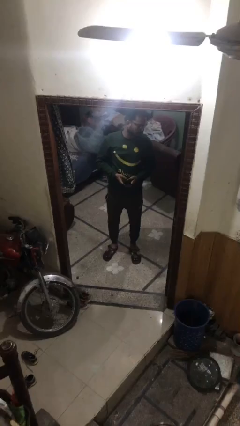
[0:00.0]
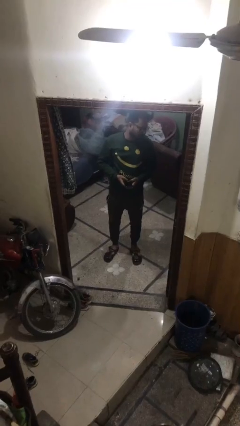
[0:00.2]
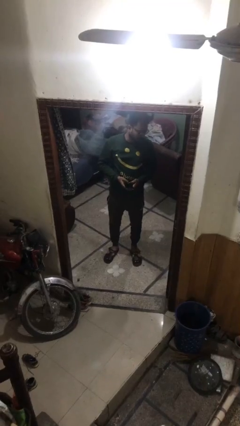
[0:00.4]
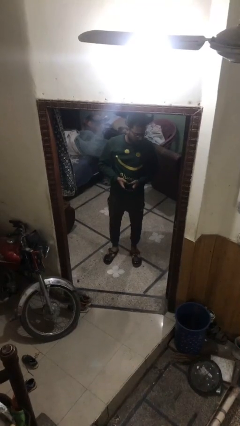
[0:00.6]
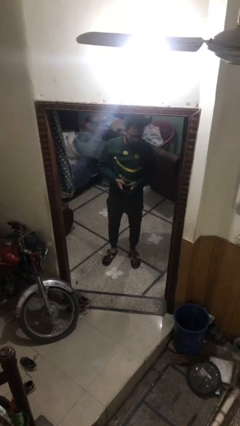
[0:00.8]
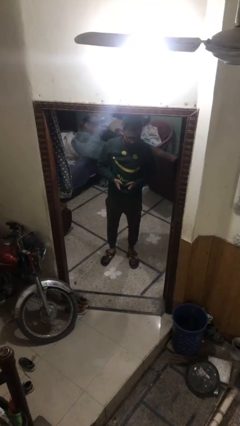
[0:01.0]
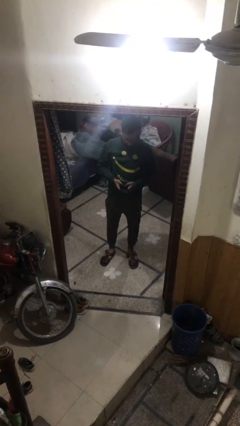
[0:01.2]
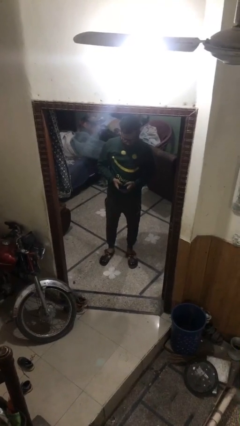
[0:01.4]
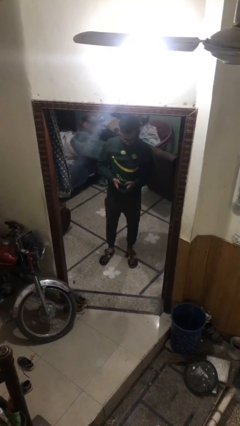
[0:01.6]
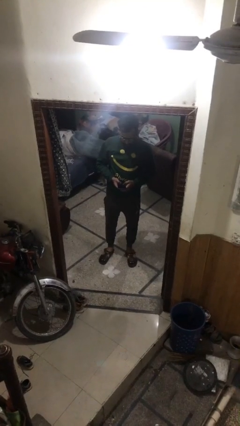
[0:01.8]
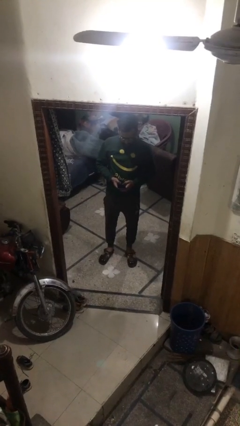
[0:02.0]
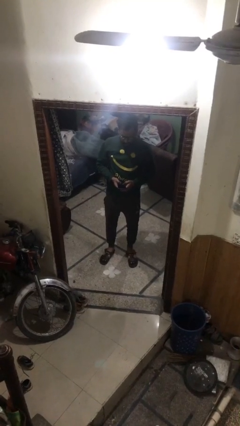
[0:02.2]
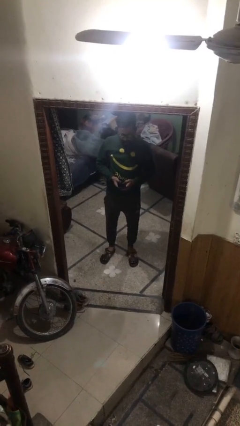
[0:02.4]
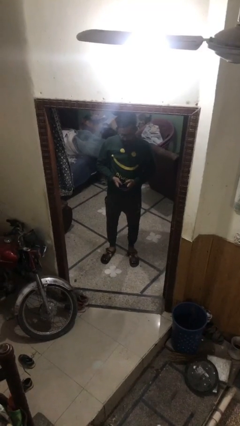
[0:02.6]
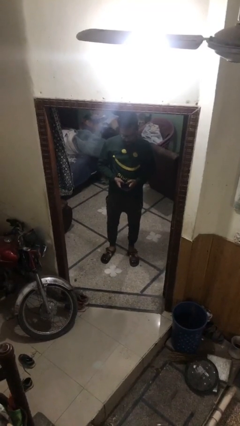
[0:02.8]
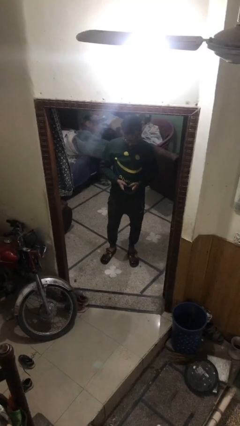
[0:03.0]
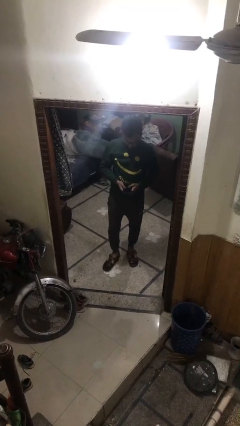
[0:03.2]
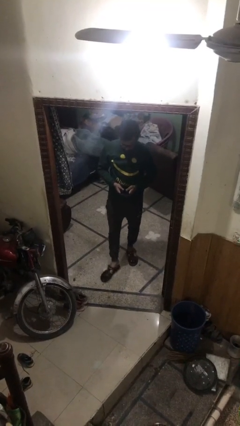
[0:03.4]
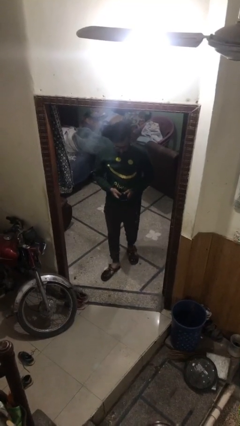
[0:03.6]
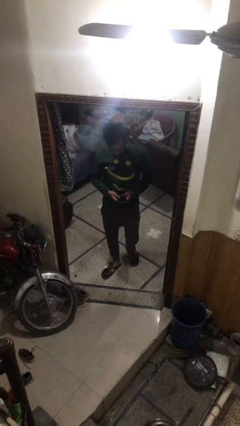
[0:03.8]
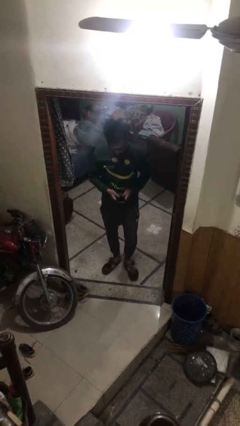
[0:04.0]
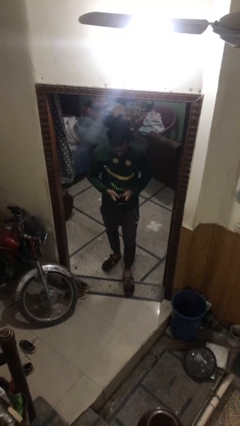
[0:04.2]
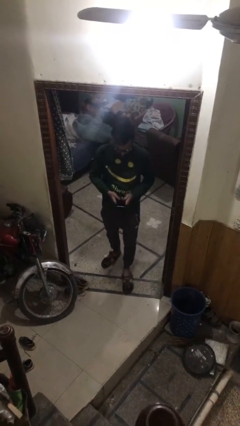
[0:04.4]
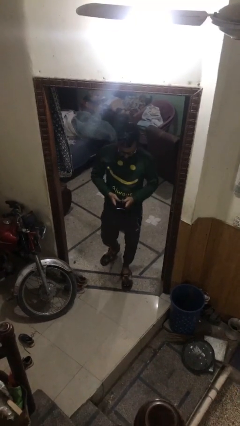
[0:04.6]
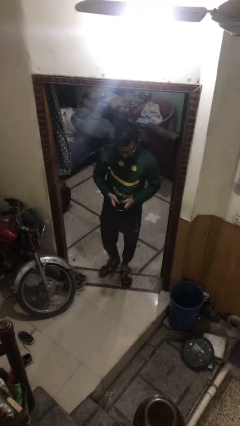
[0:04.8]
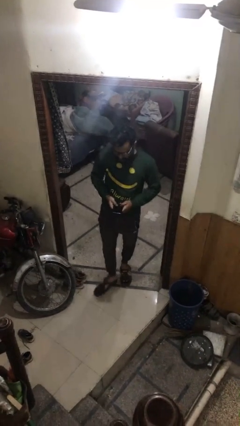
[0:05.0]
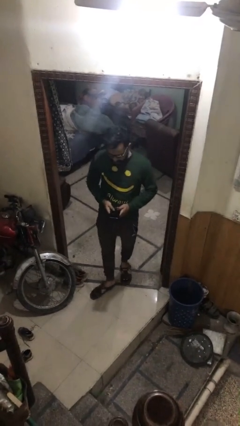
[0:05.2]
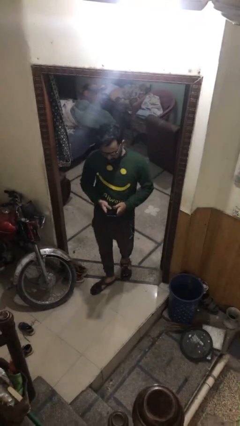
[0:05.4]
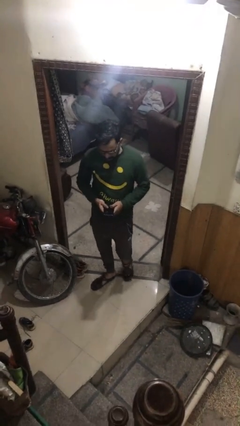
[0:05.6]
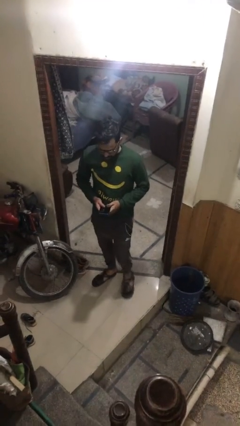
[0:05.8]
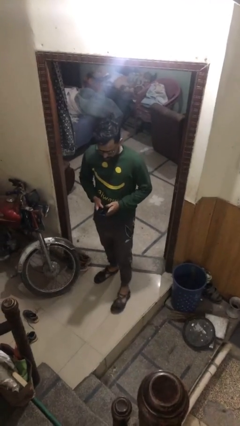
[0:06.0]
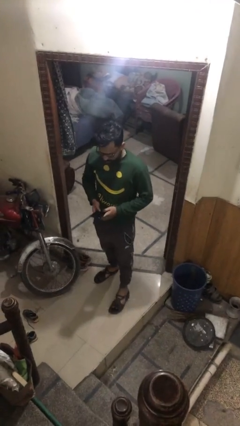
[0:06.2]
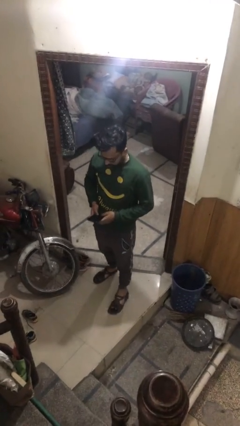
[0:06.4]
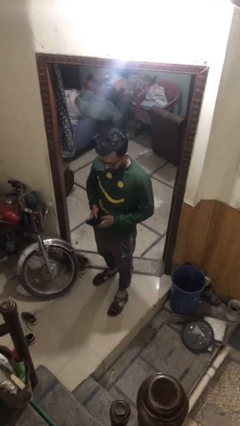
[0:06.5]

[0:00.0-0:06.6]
person enters scene through structure

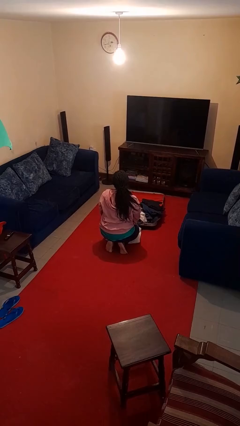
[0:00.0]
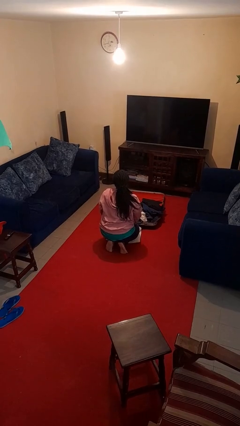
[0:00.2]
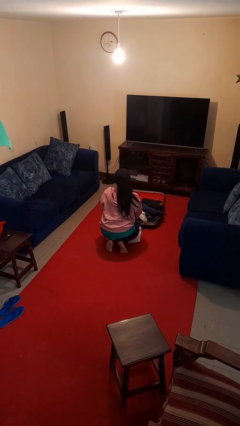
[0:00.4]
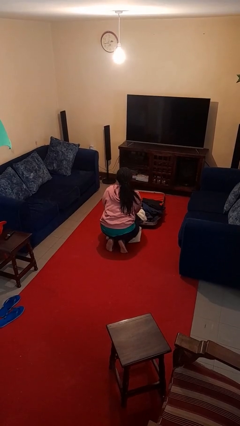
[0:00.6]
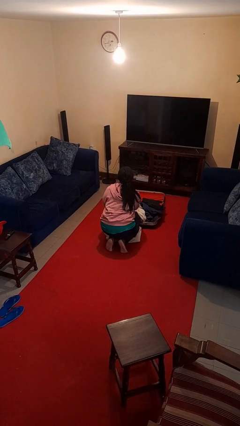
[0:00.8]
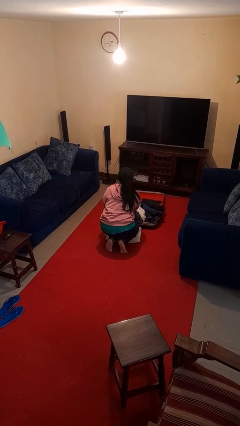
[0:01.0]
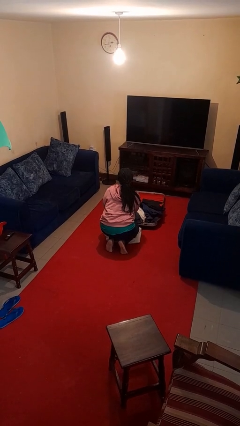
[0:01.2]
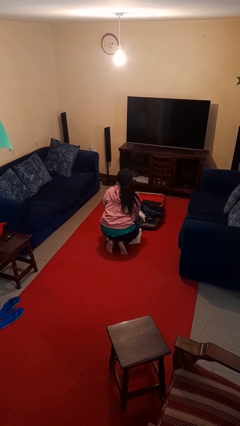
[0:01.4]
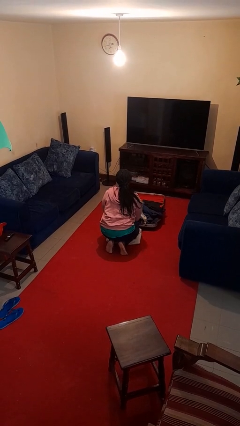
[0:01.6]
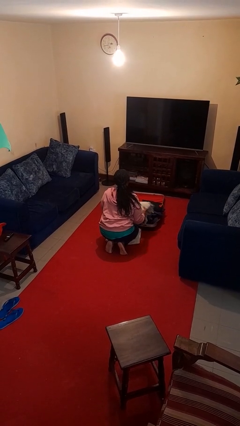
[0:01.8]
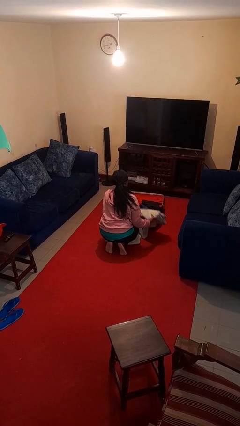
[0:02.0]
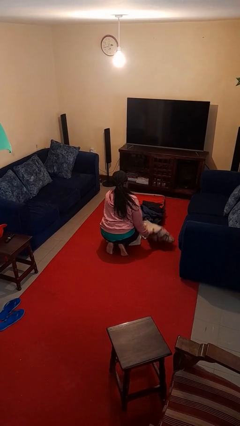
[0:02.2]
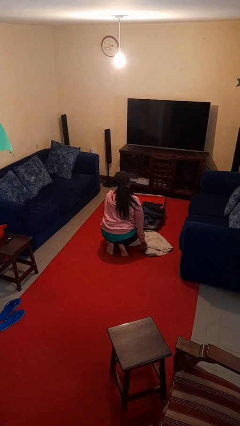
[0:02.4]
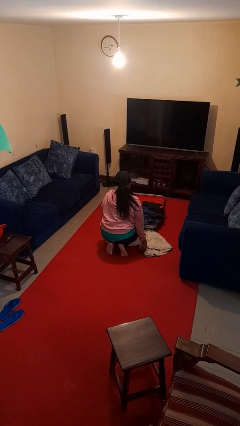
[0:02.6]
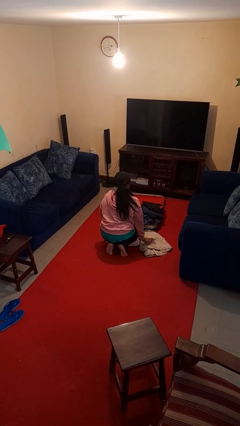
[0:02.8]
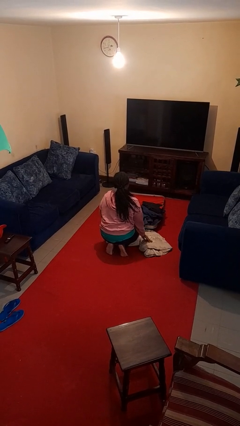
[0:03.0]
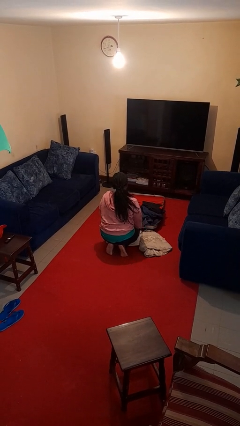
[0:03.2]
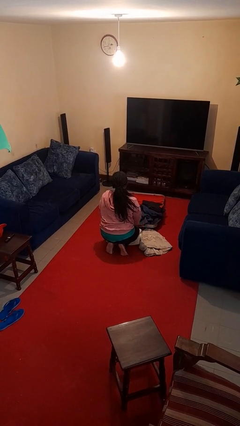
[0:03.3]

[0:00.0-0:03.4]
person unloads clothes from suitcase

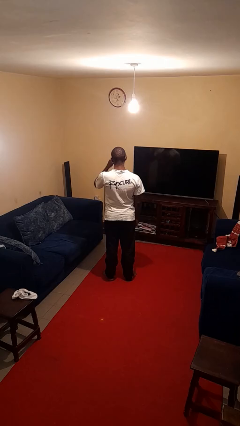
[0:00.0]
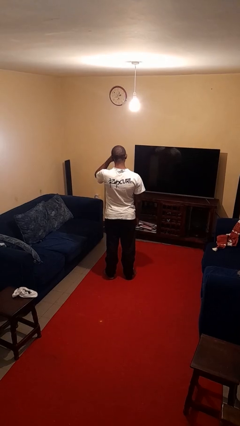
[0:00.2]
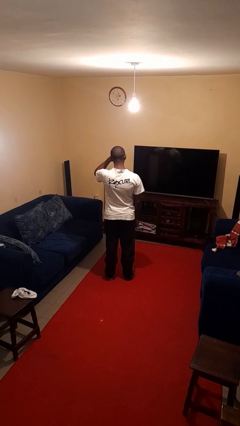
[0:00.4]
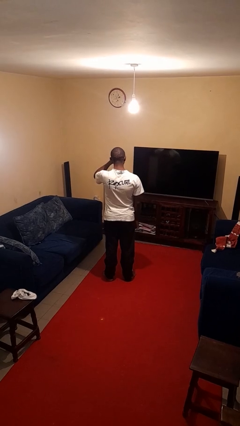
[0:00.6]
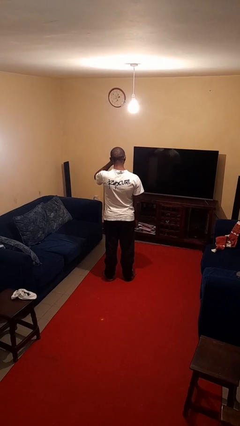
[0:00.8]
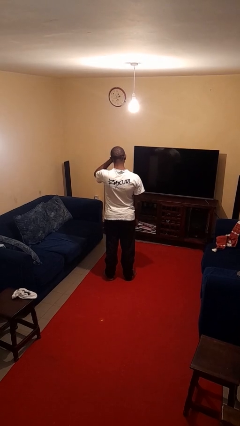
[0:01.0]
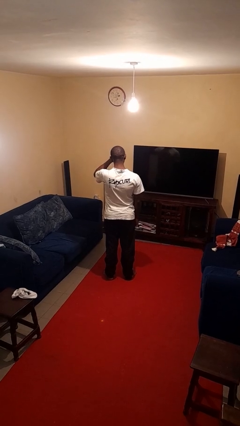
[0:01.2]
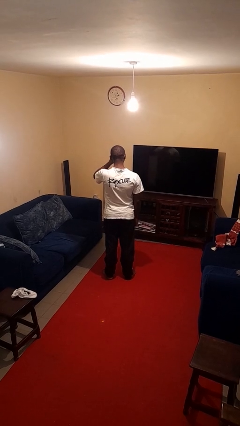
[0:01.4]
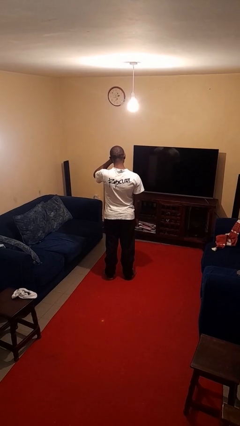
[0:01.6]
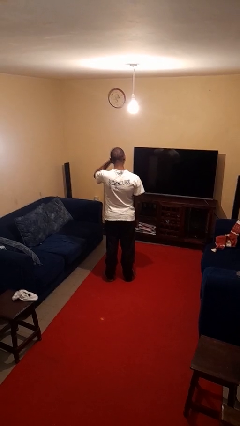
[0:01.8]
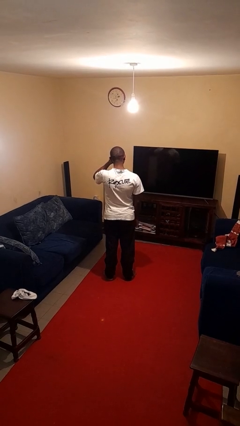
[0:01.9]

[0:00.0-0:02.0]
person rubs eyes

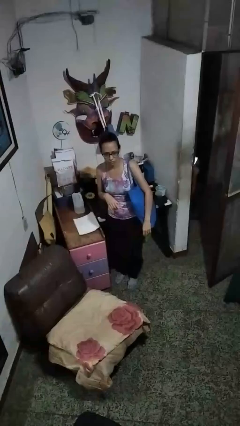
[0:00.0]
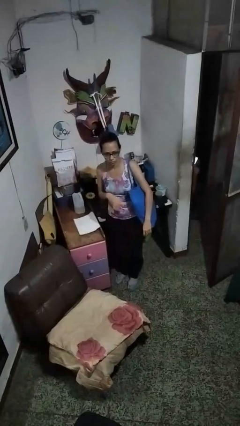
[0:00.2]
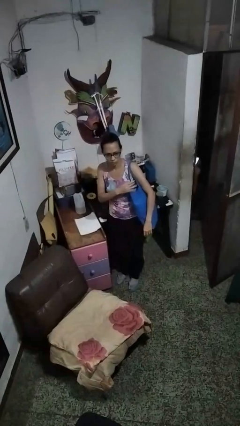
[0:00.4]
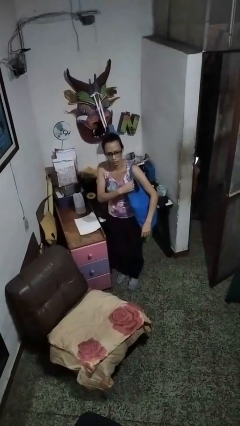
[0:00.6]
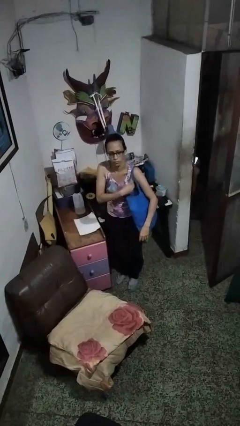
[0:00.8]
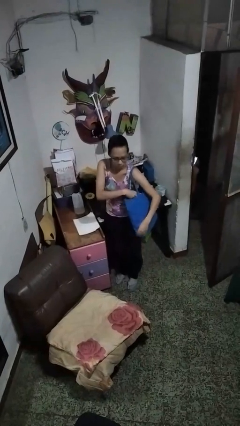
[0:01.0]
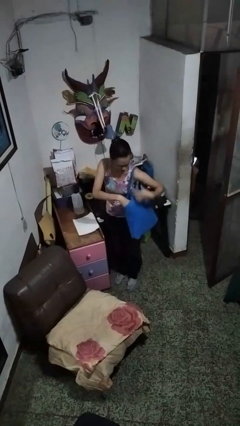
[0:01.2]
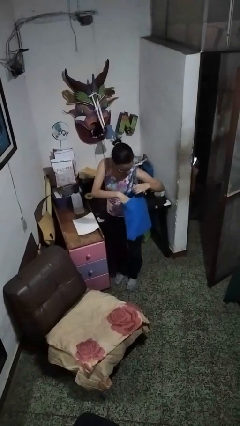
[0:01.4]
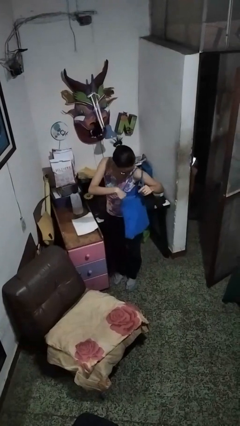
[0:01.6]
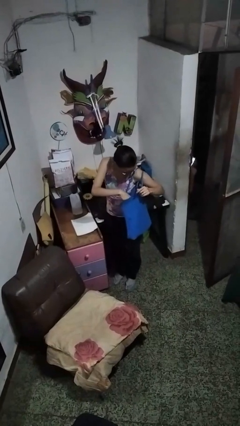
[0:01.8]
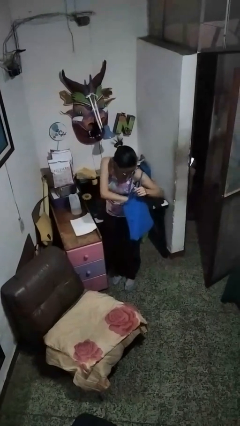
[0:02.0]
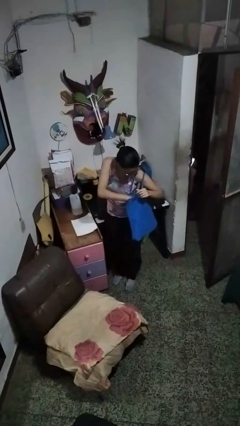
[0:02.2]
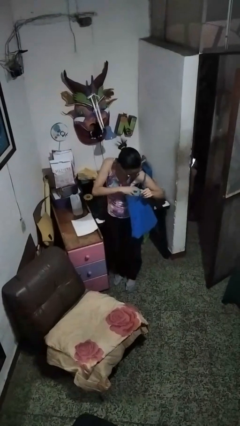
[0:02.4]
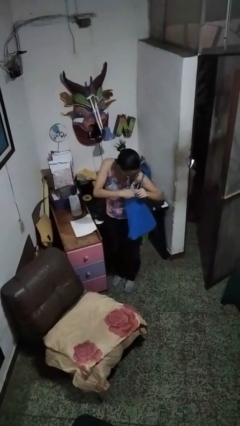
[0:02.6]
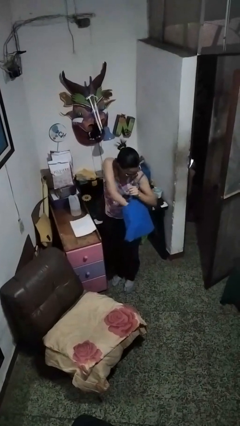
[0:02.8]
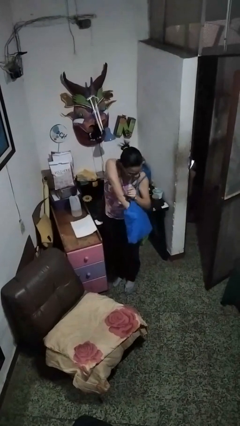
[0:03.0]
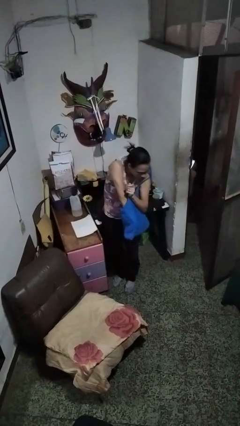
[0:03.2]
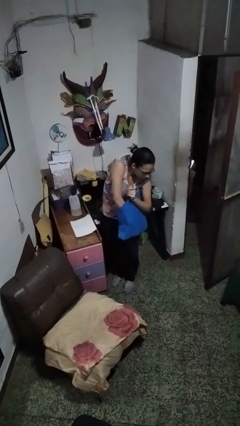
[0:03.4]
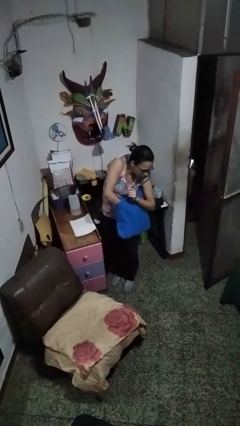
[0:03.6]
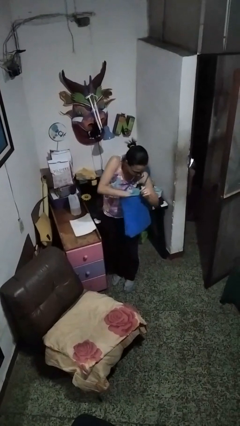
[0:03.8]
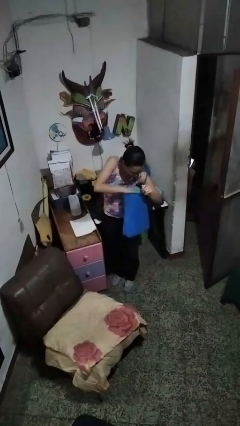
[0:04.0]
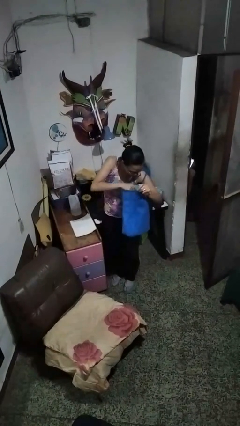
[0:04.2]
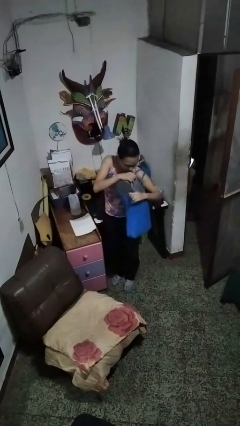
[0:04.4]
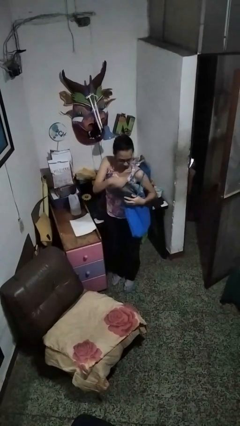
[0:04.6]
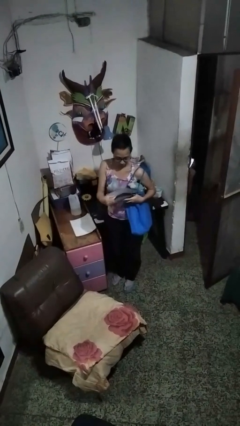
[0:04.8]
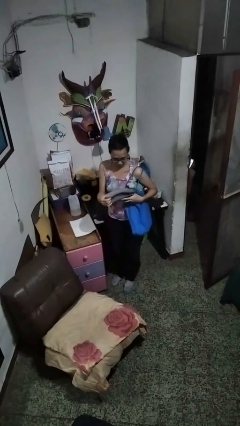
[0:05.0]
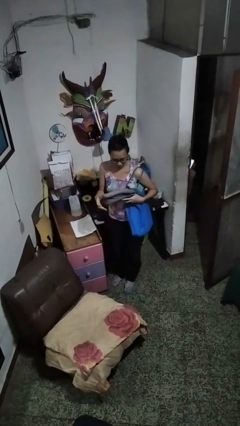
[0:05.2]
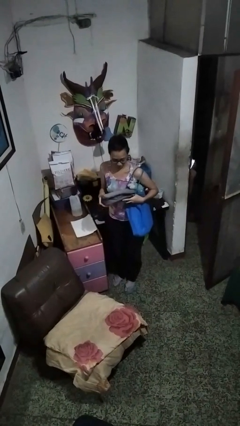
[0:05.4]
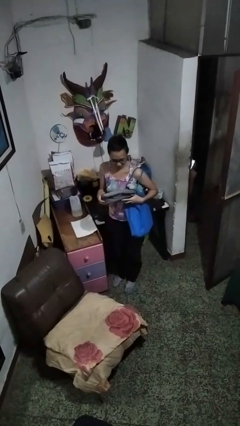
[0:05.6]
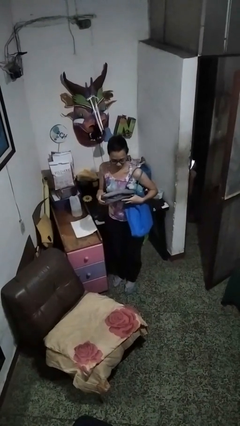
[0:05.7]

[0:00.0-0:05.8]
person takes object from bag
